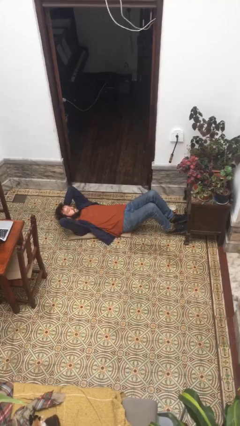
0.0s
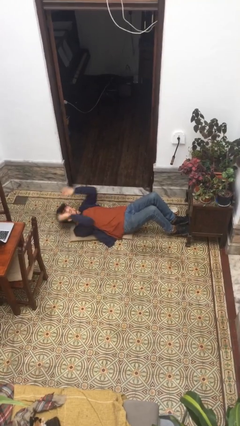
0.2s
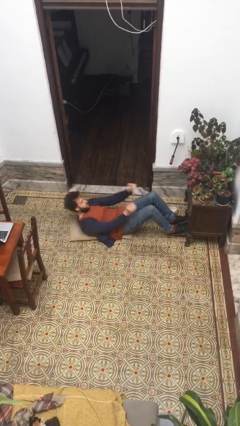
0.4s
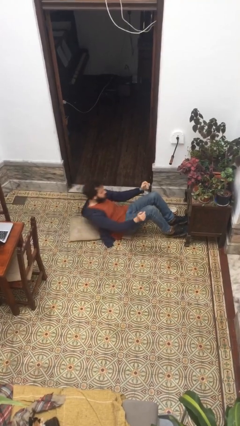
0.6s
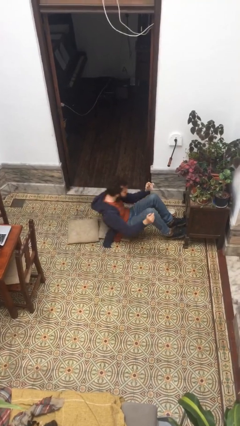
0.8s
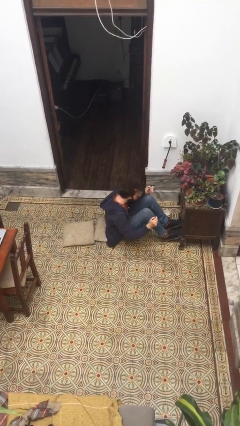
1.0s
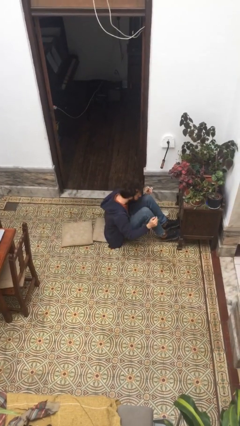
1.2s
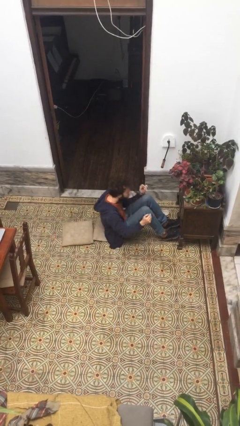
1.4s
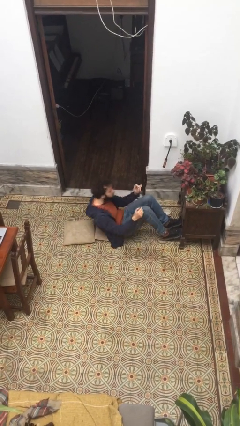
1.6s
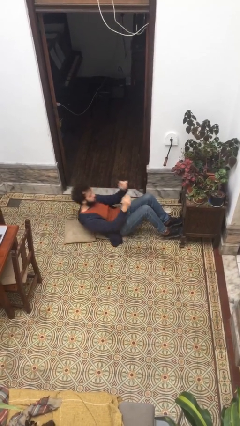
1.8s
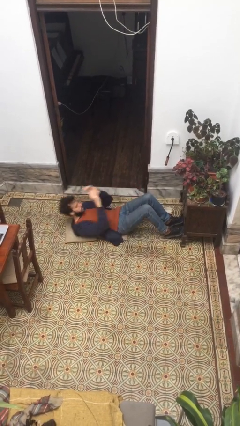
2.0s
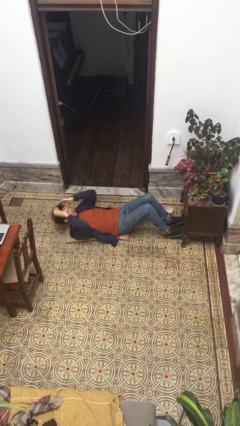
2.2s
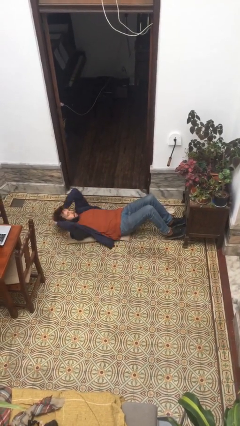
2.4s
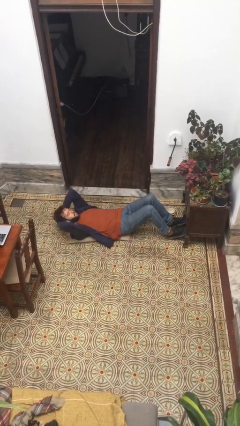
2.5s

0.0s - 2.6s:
person exercises with situp

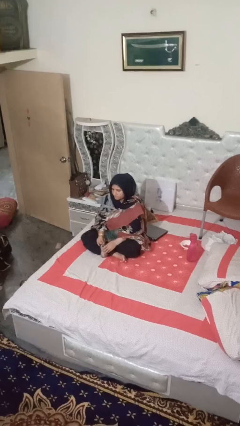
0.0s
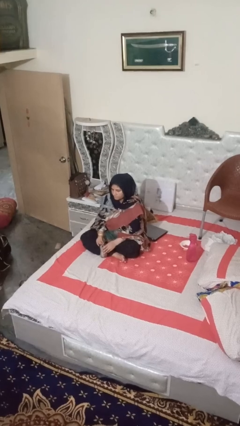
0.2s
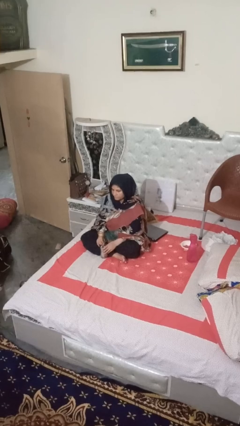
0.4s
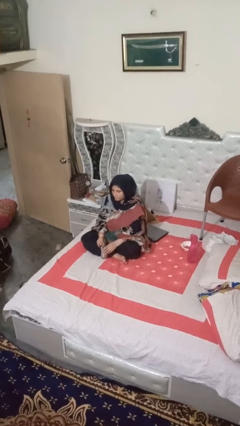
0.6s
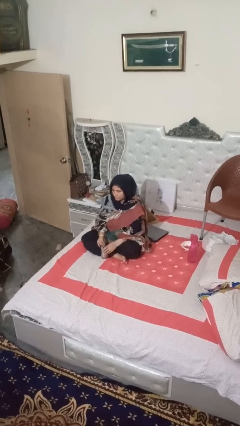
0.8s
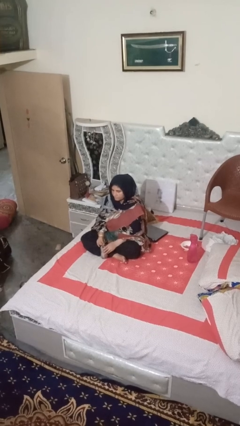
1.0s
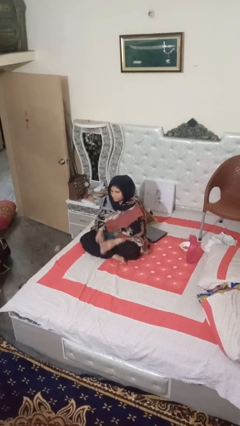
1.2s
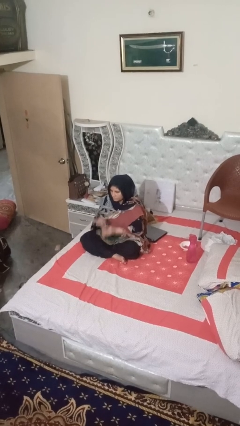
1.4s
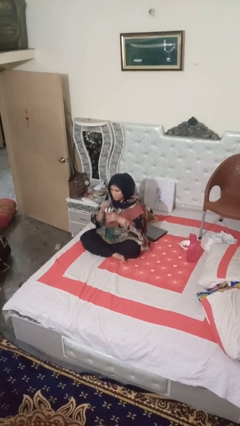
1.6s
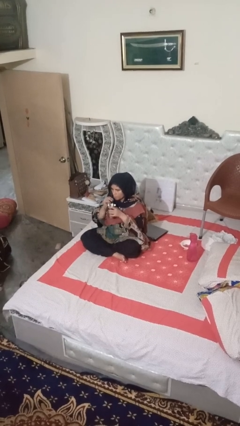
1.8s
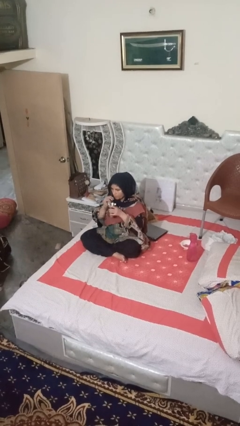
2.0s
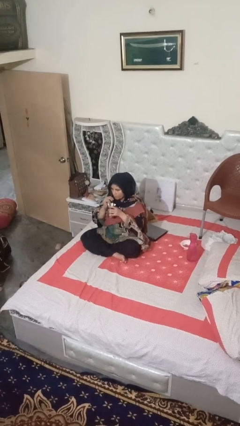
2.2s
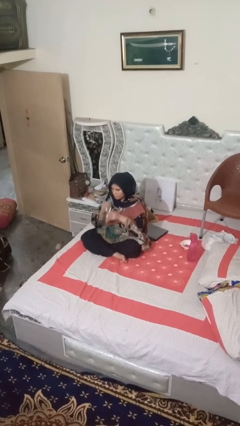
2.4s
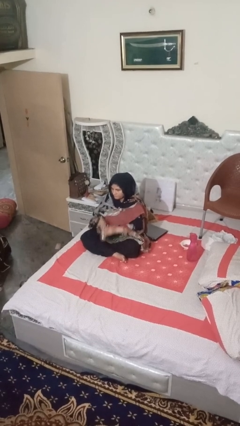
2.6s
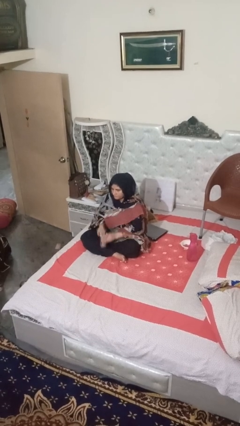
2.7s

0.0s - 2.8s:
person drinks from straw

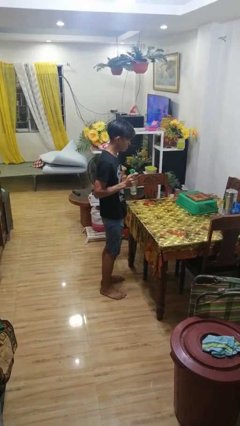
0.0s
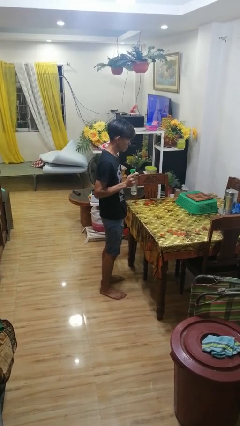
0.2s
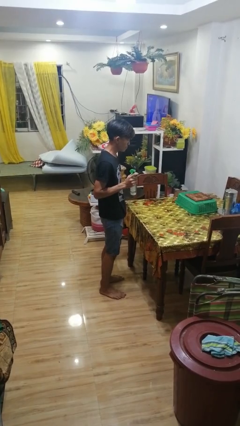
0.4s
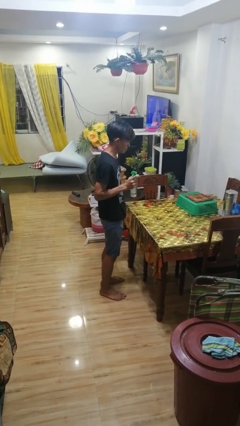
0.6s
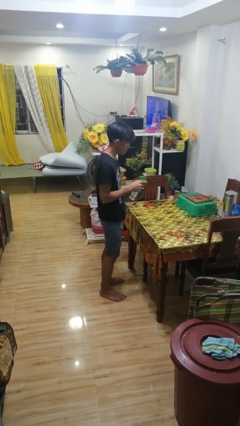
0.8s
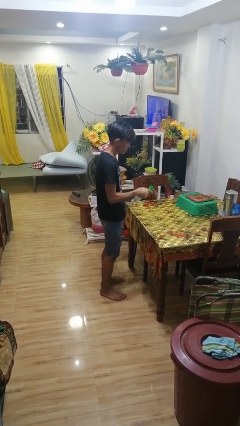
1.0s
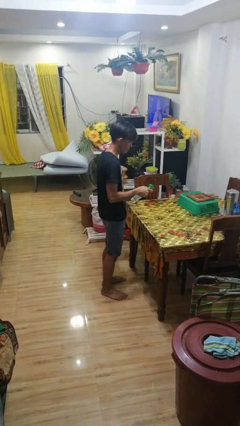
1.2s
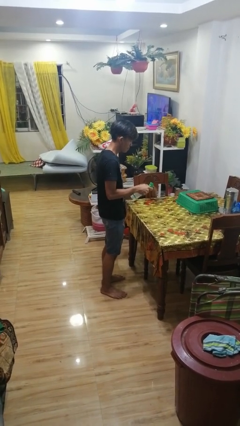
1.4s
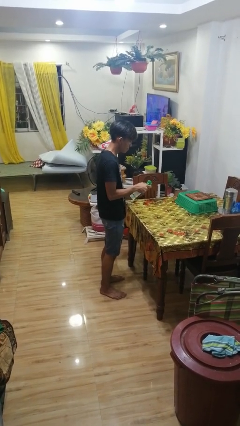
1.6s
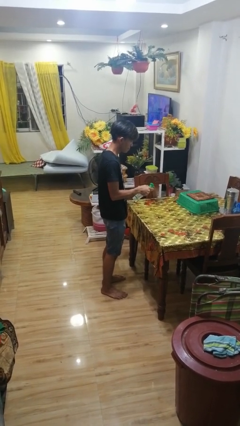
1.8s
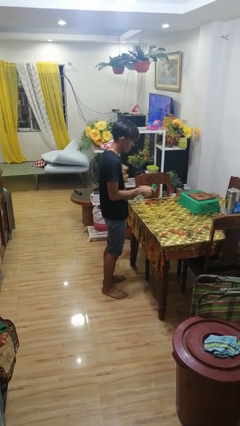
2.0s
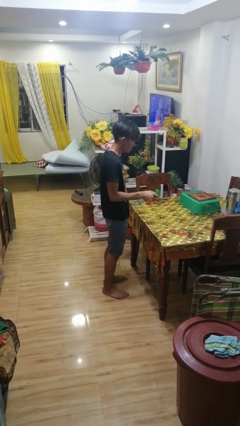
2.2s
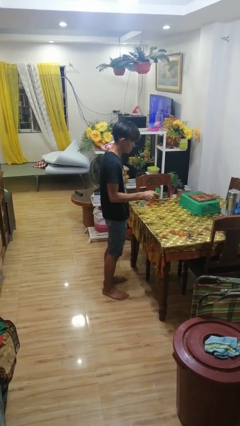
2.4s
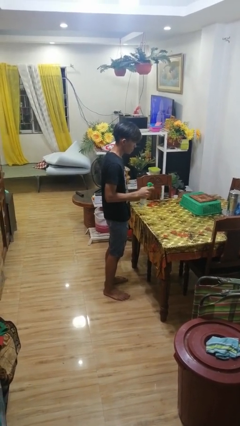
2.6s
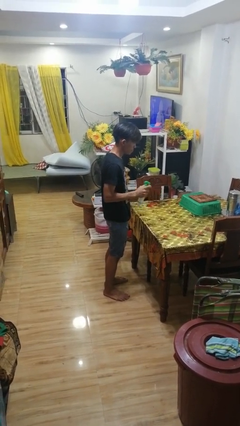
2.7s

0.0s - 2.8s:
person sprays from bottle

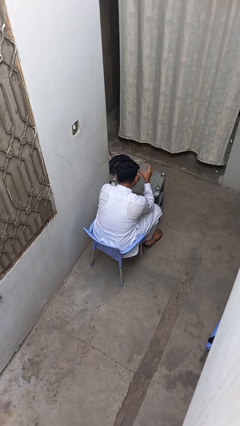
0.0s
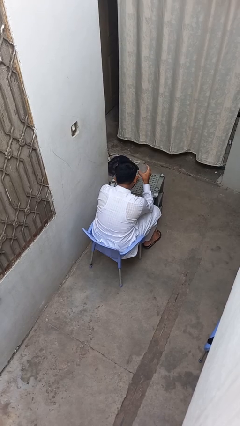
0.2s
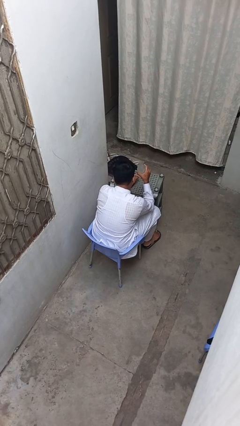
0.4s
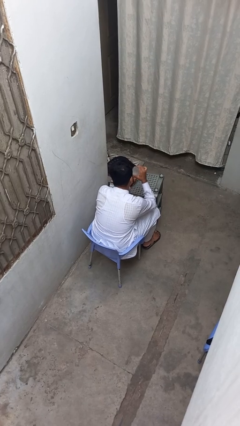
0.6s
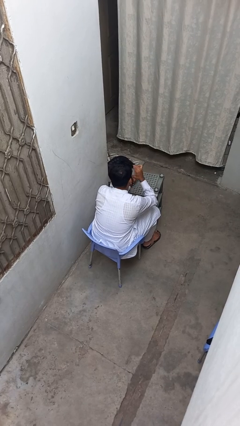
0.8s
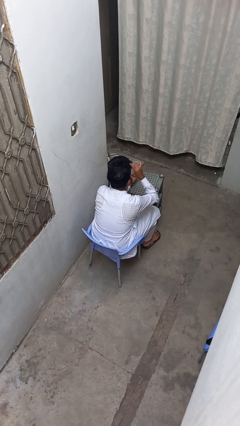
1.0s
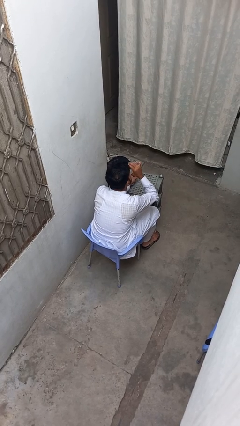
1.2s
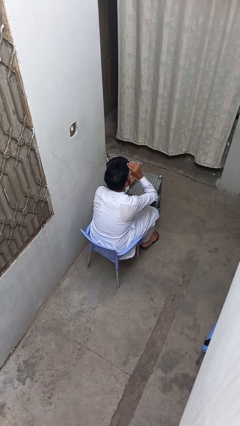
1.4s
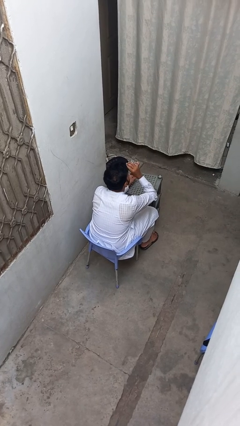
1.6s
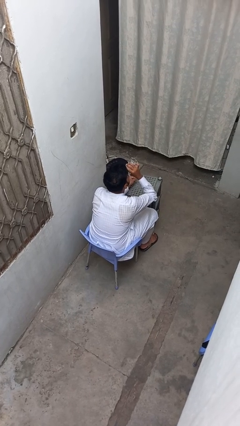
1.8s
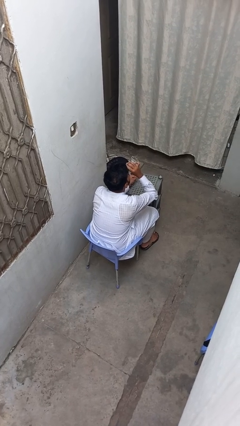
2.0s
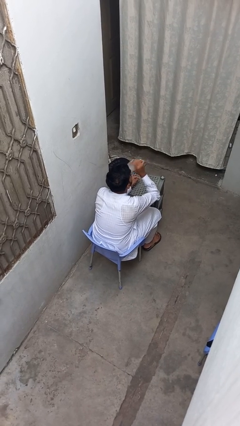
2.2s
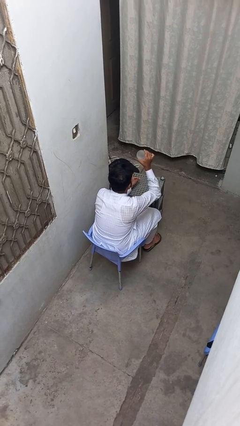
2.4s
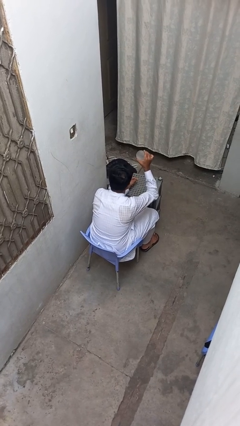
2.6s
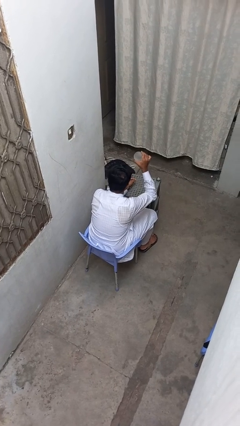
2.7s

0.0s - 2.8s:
person drinks from shotglass

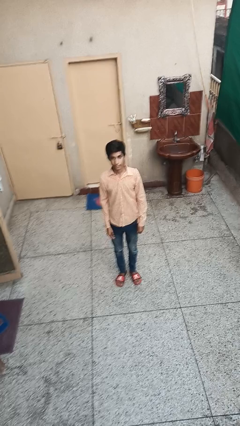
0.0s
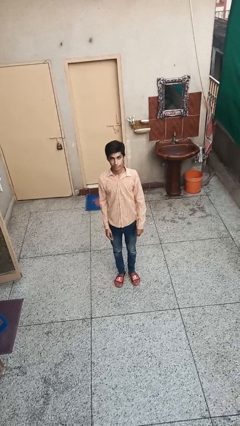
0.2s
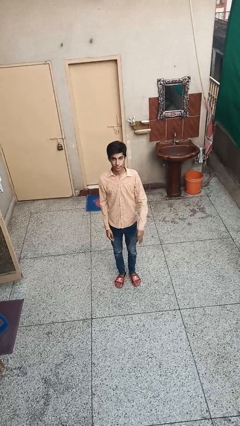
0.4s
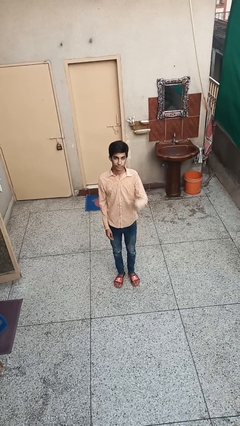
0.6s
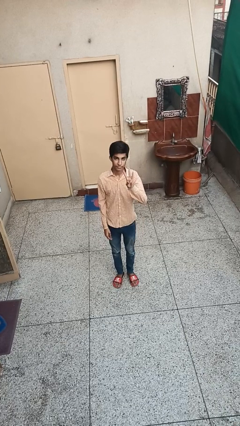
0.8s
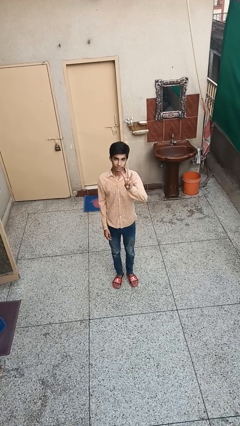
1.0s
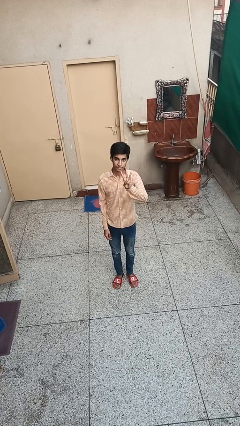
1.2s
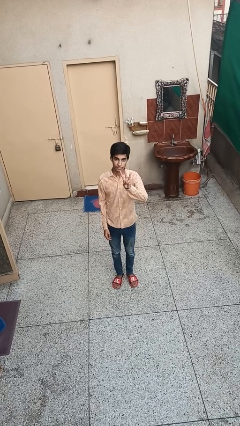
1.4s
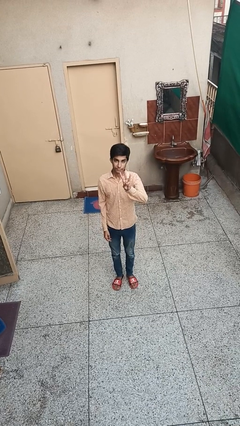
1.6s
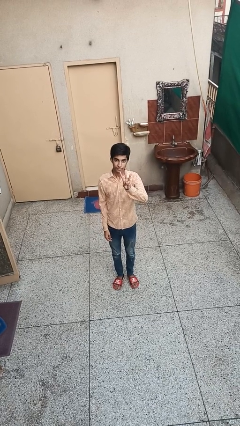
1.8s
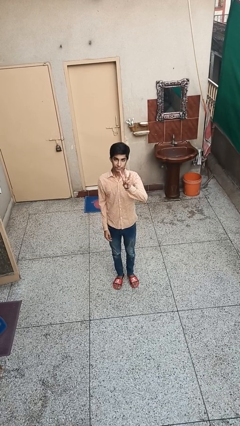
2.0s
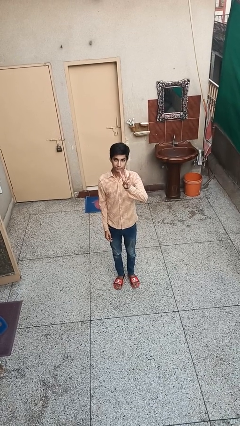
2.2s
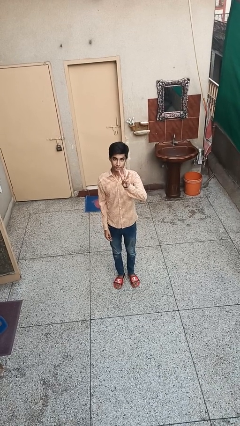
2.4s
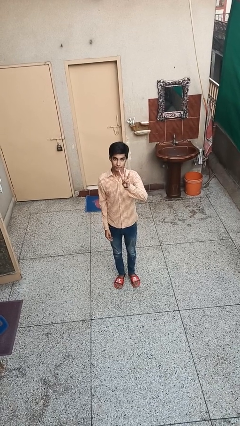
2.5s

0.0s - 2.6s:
person gestures number three

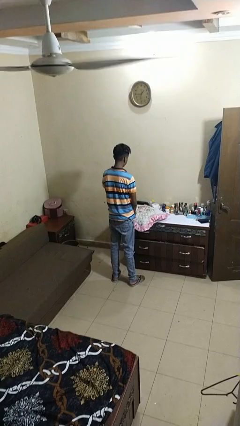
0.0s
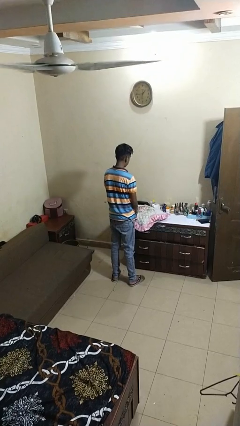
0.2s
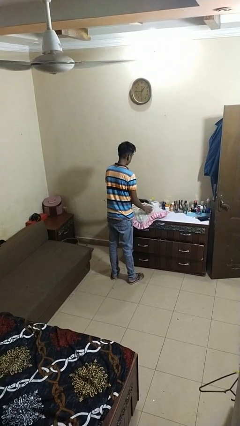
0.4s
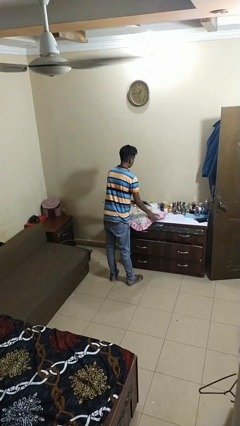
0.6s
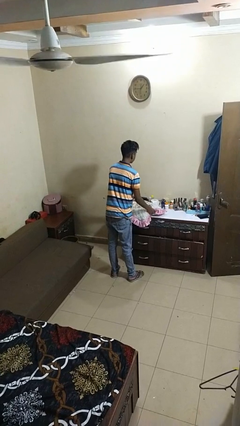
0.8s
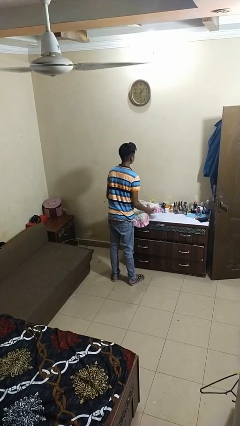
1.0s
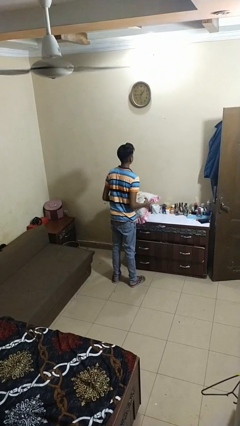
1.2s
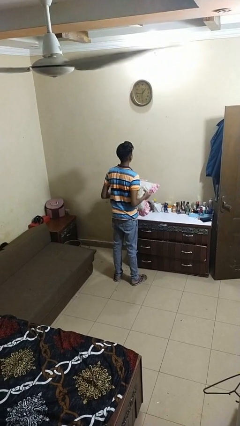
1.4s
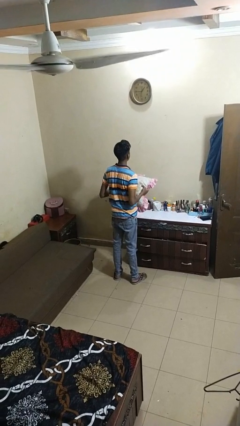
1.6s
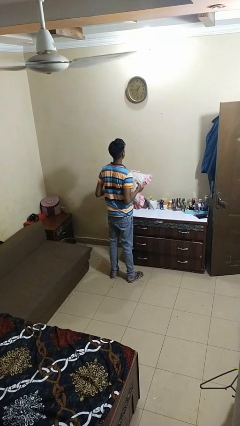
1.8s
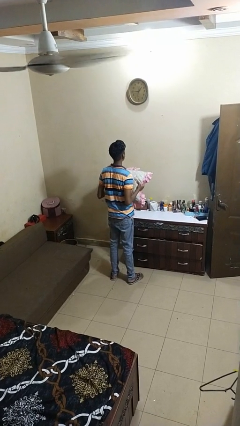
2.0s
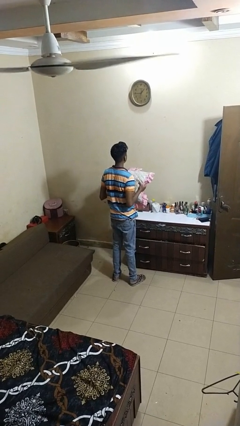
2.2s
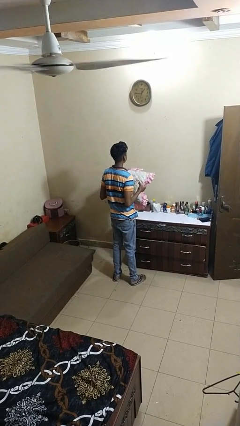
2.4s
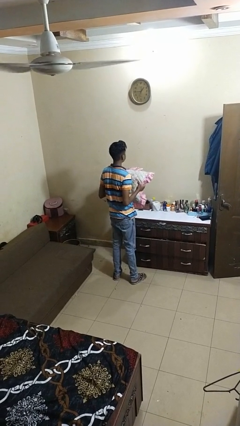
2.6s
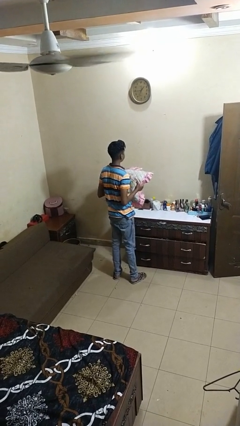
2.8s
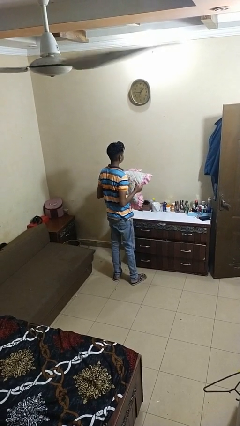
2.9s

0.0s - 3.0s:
person picks up object from countertop
